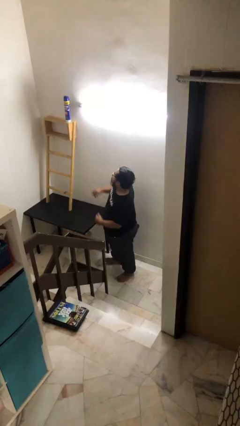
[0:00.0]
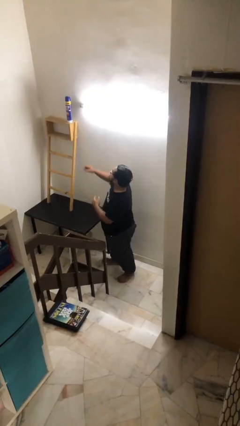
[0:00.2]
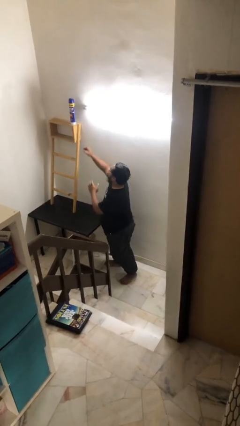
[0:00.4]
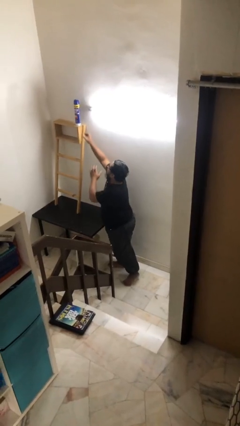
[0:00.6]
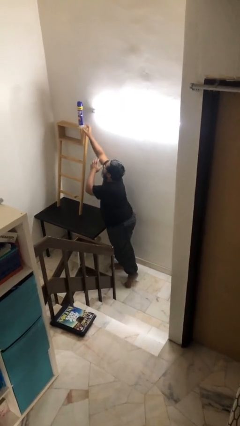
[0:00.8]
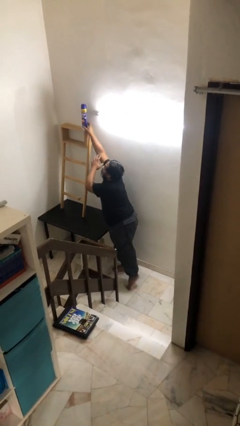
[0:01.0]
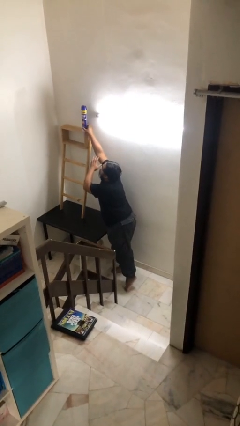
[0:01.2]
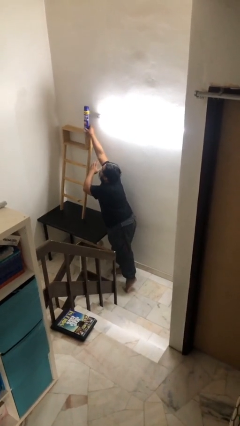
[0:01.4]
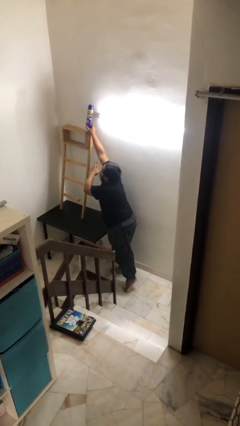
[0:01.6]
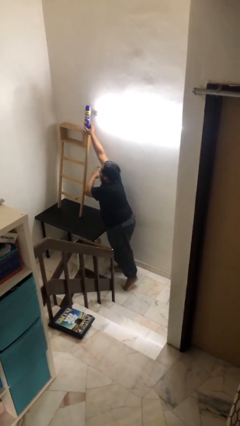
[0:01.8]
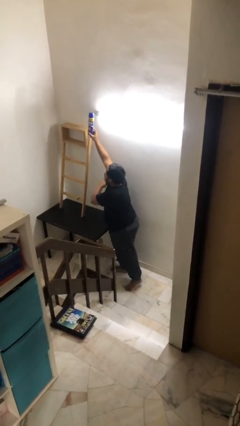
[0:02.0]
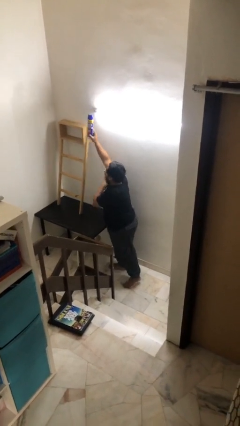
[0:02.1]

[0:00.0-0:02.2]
person picks up object from shelf

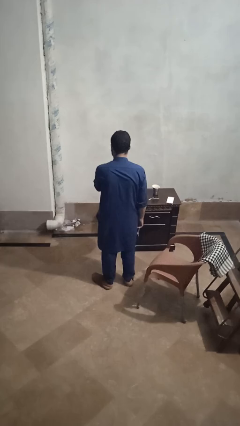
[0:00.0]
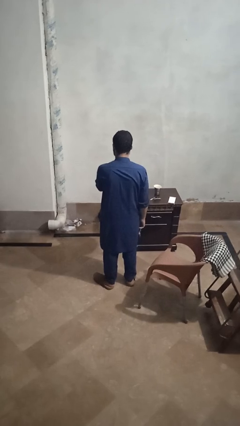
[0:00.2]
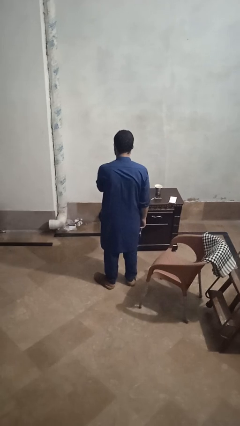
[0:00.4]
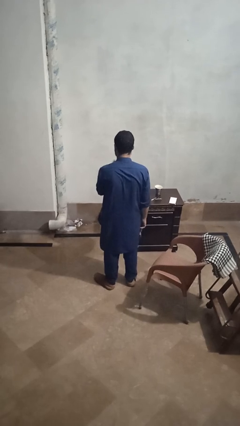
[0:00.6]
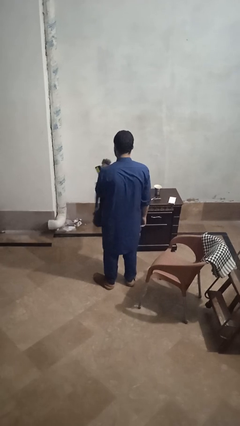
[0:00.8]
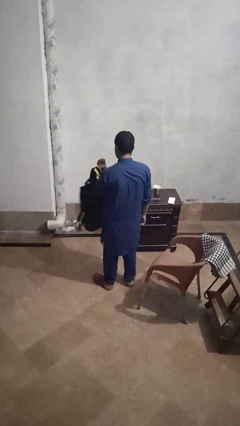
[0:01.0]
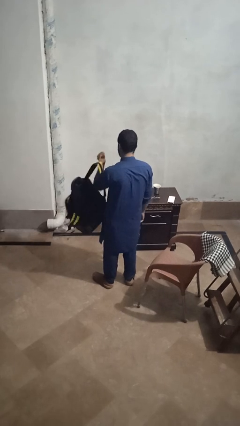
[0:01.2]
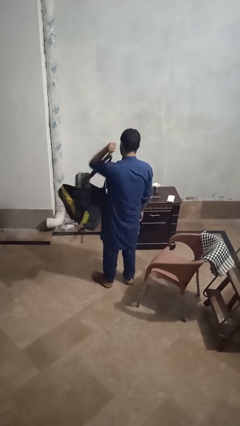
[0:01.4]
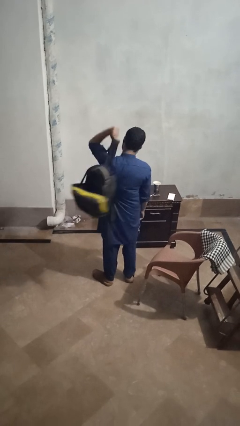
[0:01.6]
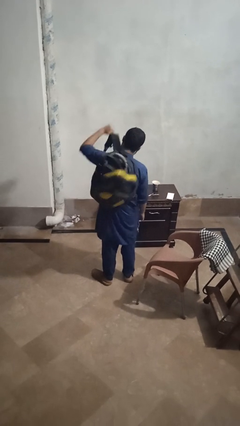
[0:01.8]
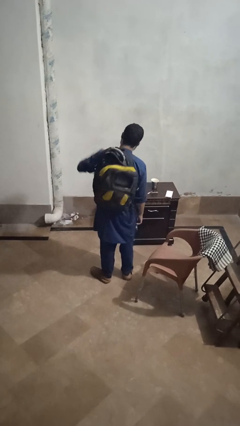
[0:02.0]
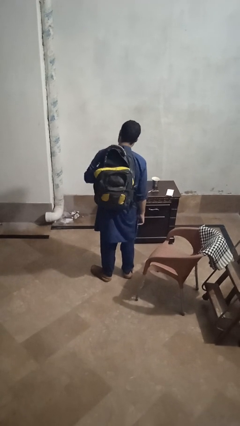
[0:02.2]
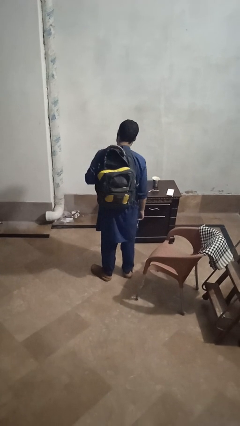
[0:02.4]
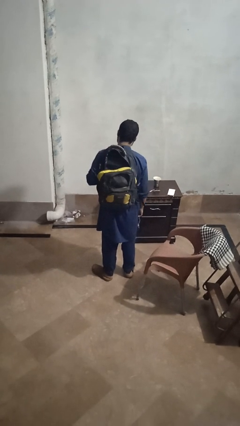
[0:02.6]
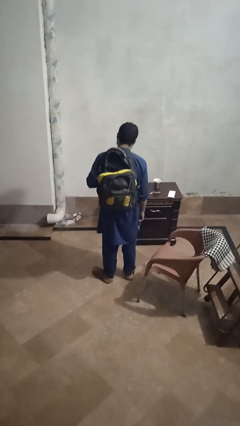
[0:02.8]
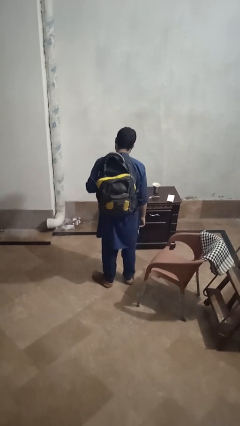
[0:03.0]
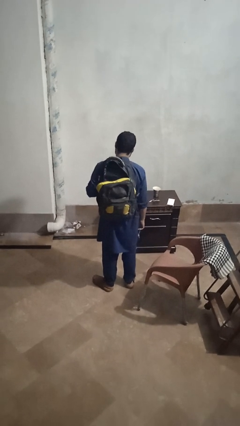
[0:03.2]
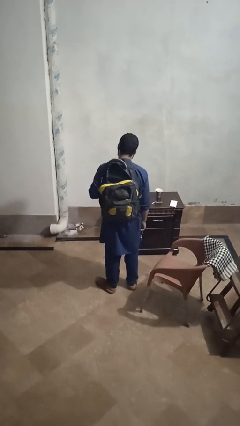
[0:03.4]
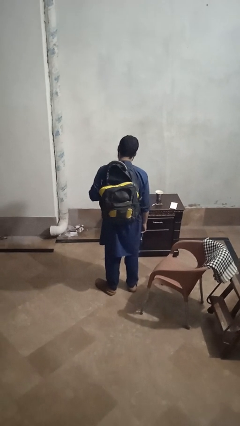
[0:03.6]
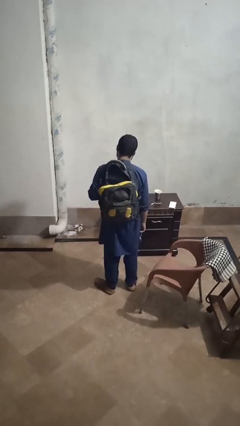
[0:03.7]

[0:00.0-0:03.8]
person puts on backpack

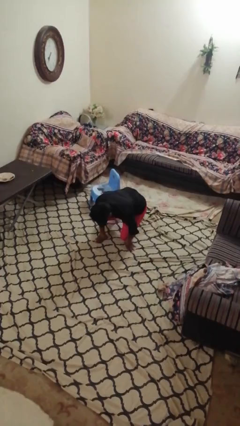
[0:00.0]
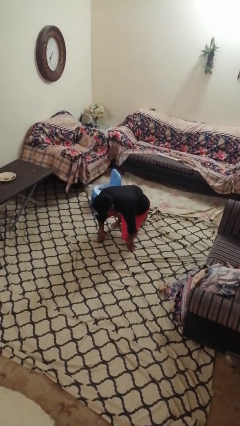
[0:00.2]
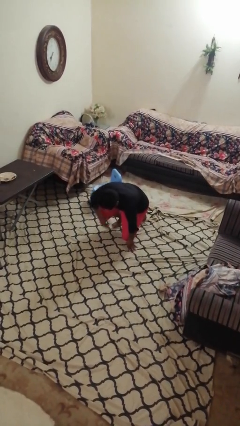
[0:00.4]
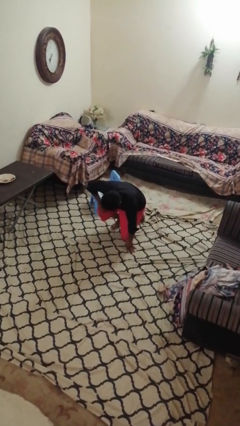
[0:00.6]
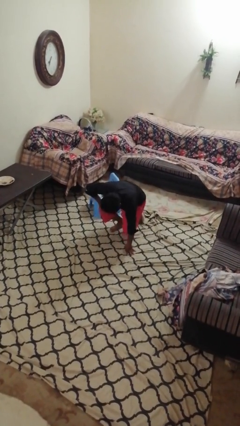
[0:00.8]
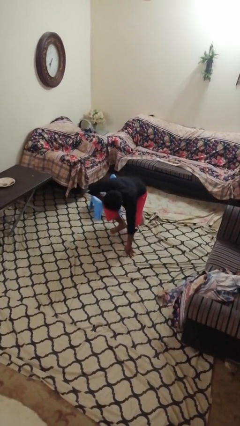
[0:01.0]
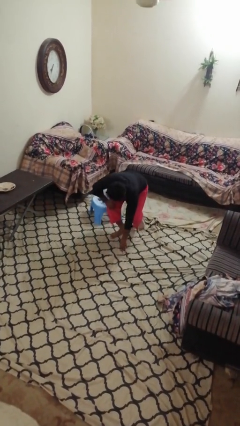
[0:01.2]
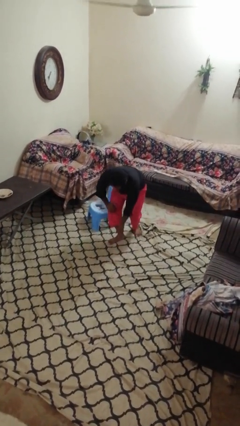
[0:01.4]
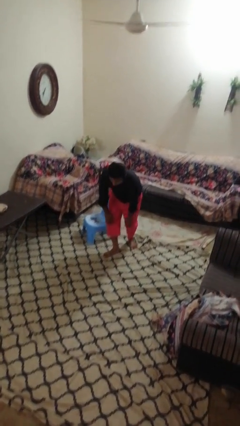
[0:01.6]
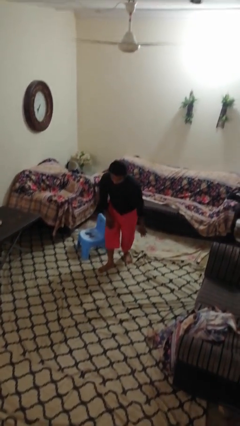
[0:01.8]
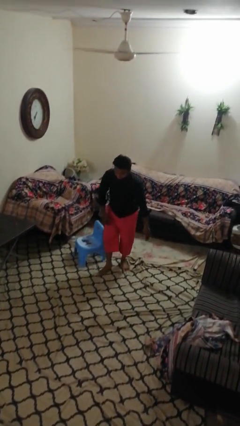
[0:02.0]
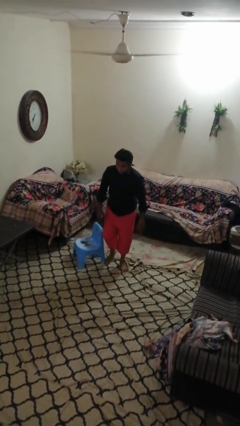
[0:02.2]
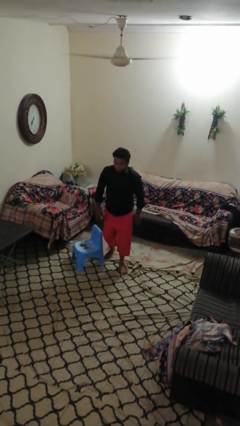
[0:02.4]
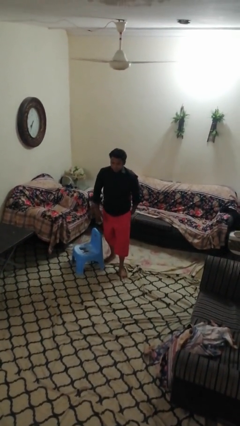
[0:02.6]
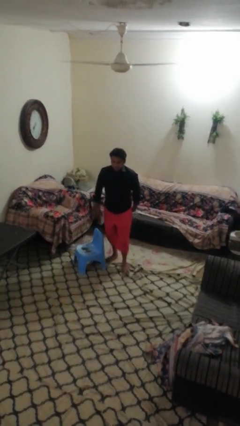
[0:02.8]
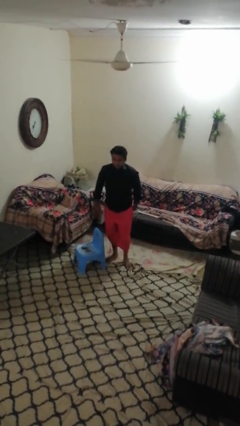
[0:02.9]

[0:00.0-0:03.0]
person stands up from floor

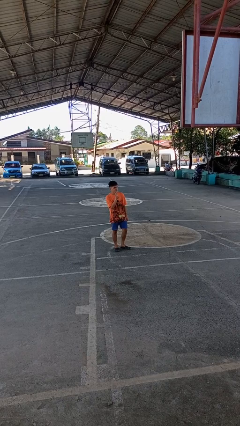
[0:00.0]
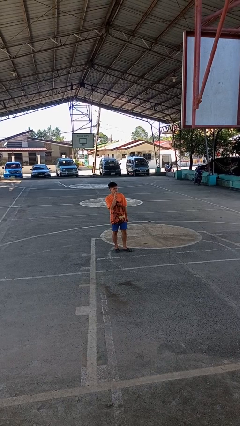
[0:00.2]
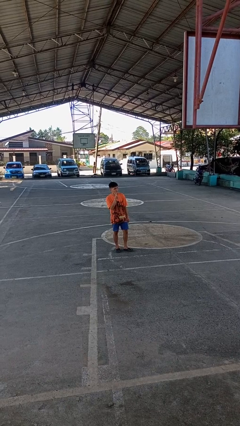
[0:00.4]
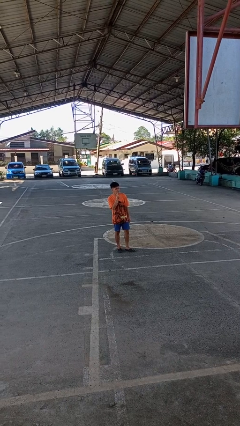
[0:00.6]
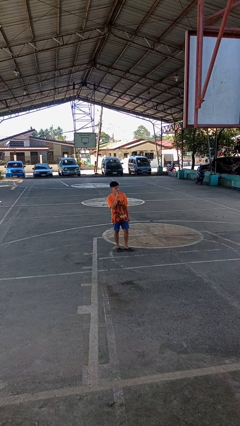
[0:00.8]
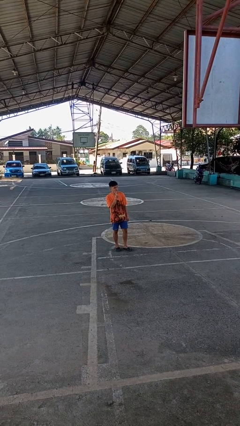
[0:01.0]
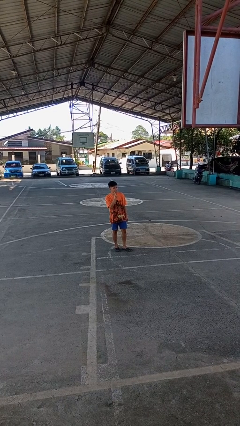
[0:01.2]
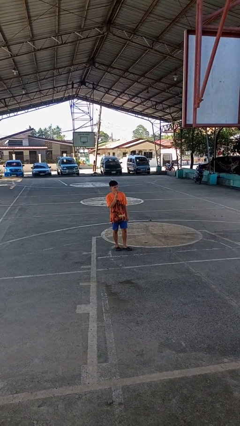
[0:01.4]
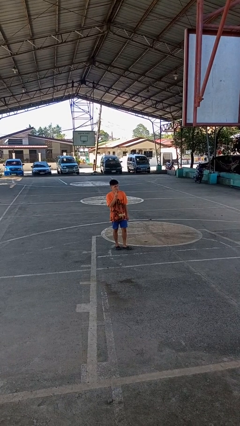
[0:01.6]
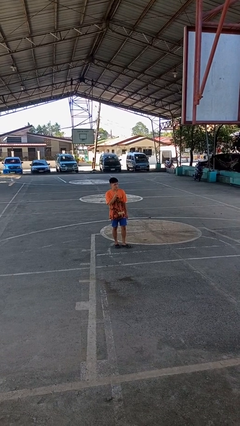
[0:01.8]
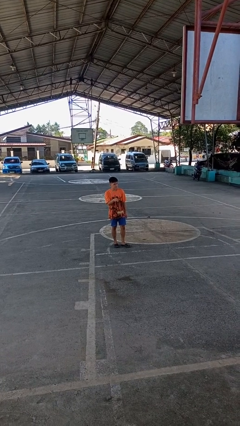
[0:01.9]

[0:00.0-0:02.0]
person gestures peace

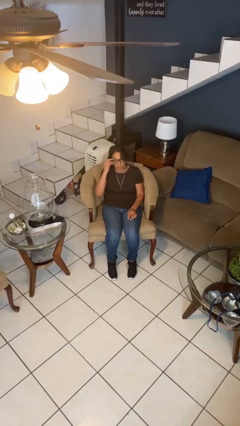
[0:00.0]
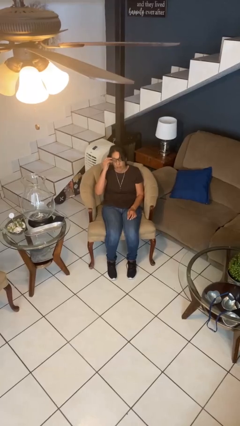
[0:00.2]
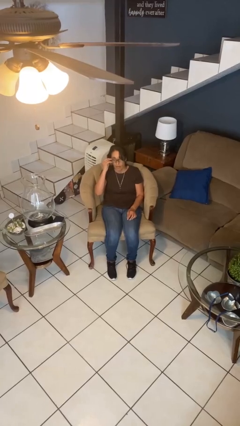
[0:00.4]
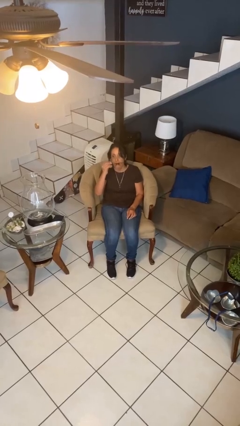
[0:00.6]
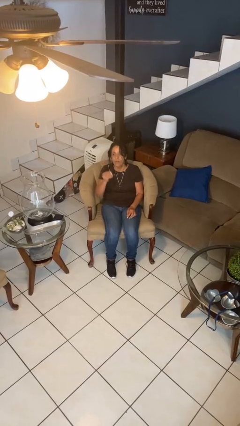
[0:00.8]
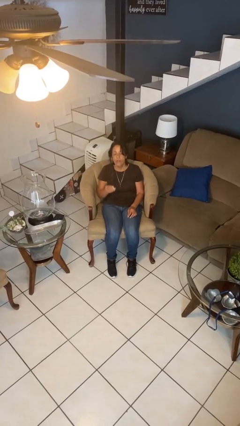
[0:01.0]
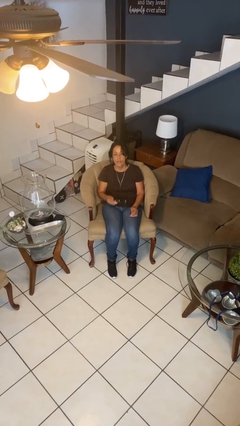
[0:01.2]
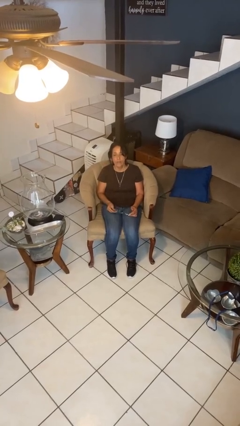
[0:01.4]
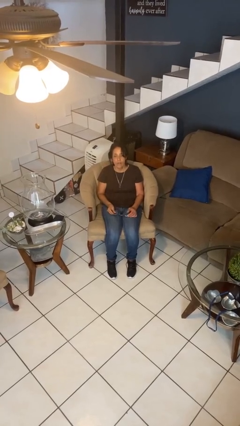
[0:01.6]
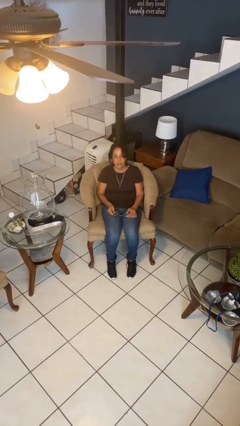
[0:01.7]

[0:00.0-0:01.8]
person takes off glasses

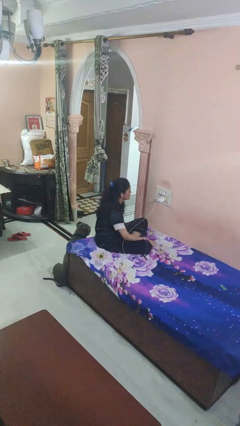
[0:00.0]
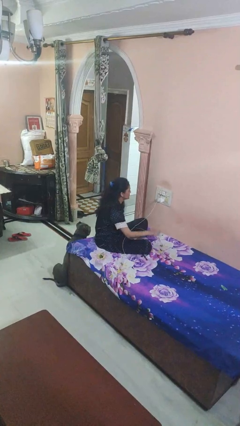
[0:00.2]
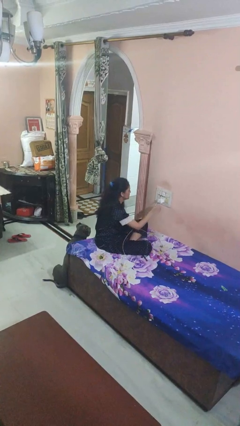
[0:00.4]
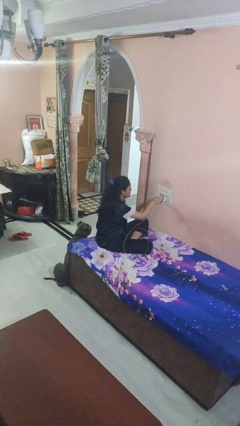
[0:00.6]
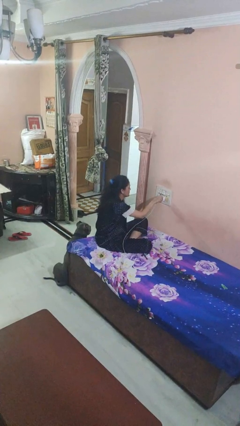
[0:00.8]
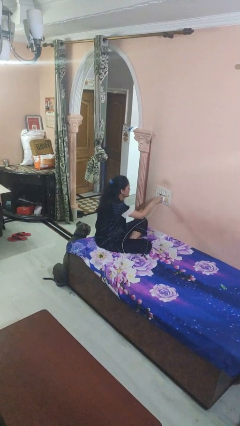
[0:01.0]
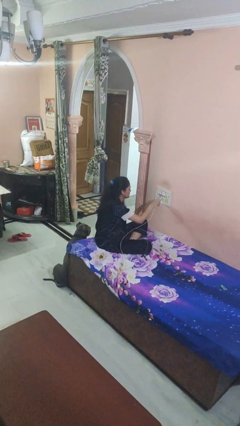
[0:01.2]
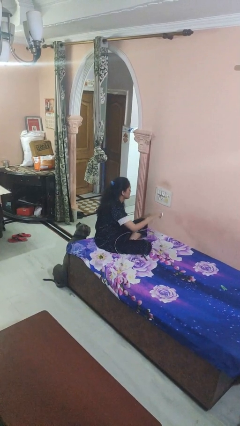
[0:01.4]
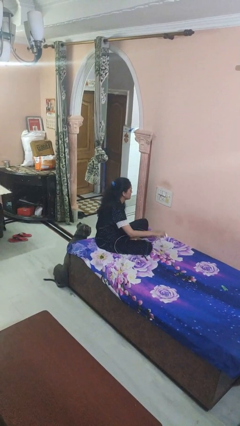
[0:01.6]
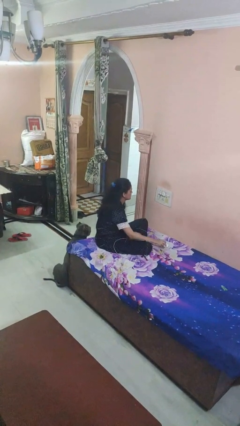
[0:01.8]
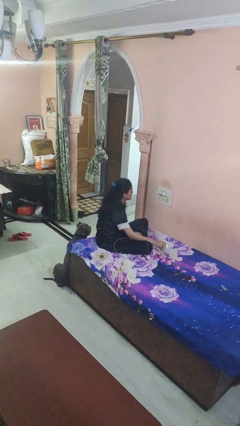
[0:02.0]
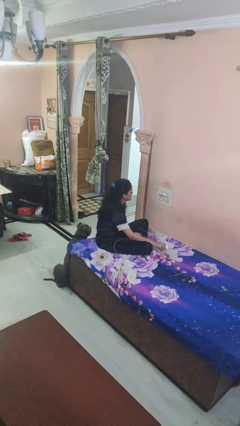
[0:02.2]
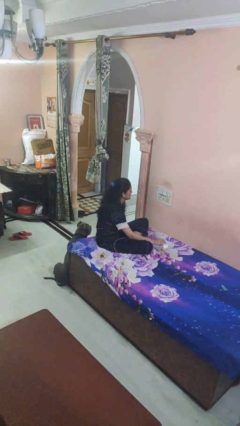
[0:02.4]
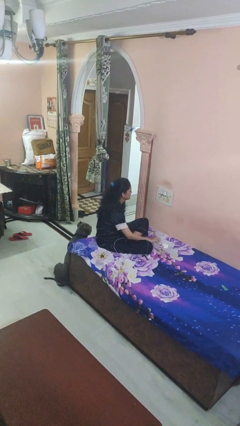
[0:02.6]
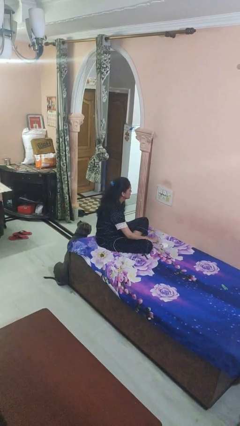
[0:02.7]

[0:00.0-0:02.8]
person unplugs from electrical socket

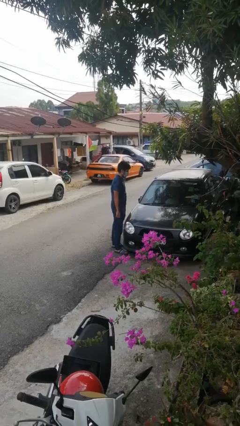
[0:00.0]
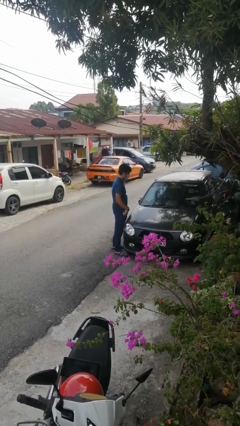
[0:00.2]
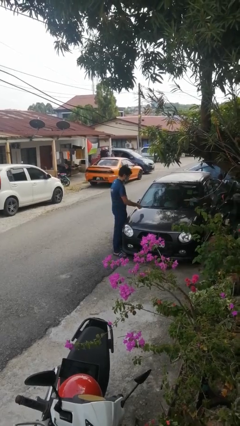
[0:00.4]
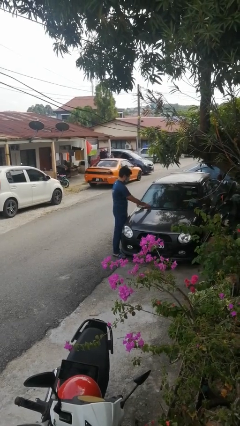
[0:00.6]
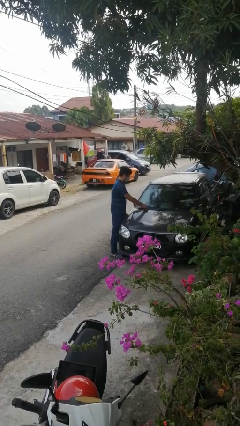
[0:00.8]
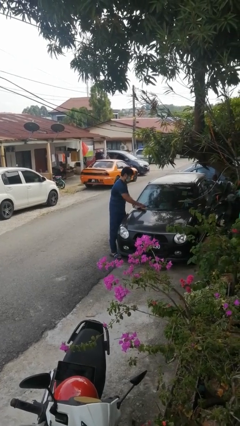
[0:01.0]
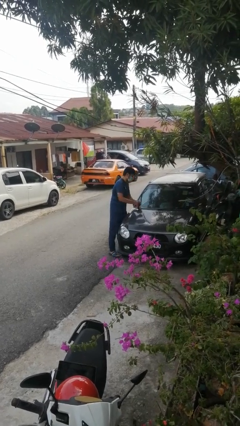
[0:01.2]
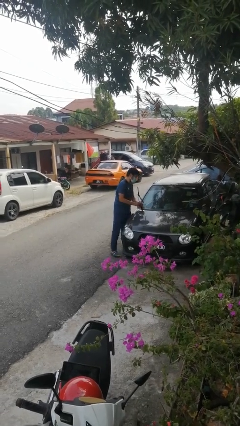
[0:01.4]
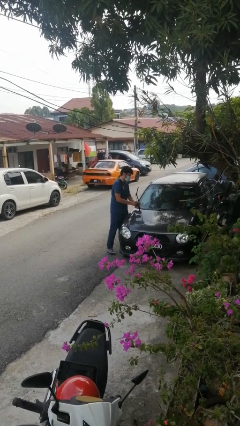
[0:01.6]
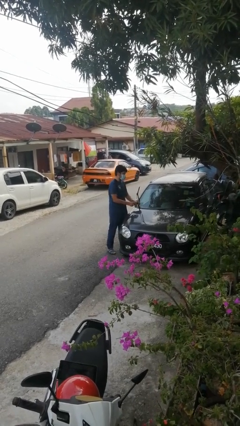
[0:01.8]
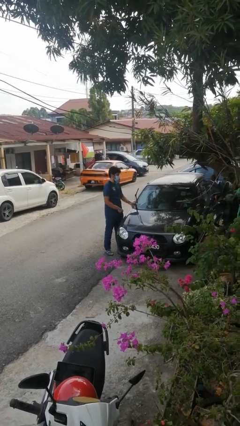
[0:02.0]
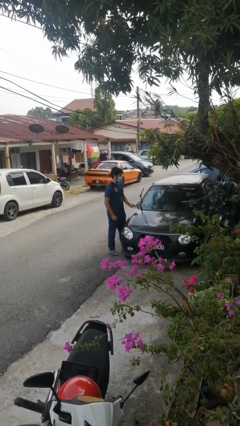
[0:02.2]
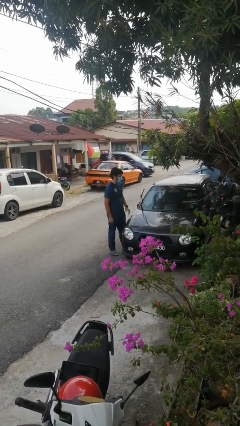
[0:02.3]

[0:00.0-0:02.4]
person flips up car wipers
